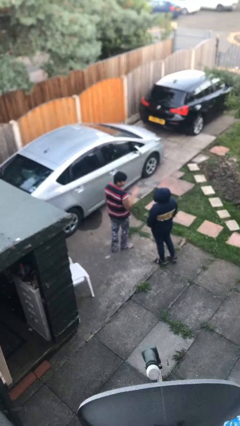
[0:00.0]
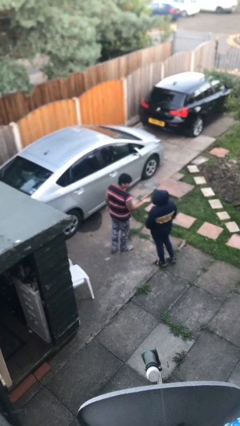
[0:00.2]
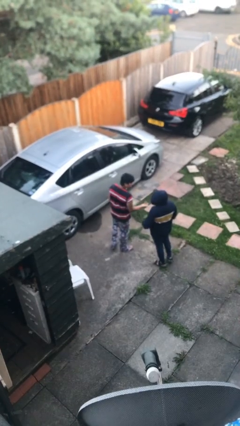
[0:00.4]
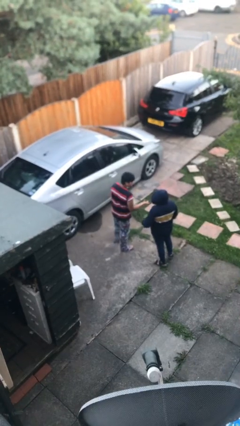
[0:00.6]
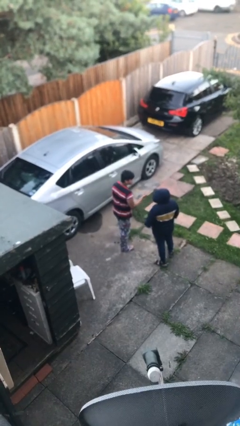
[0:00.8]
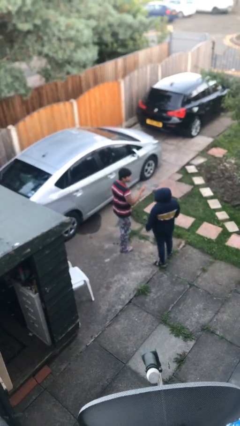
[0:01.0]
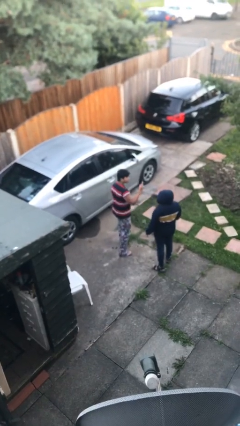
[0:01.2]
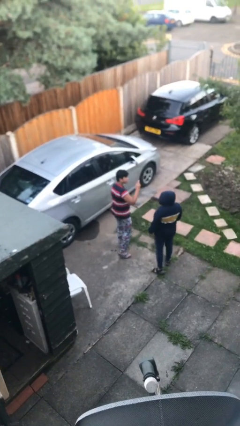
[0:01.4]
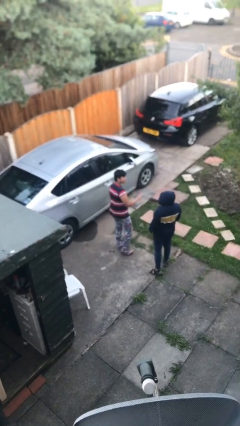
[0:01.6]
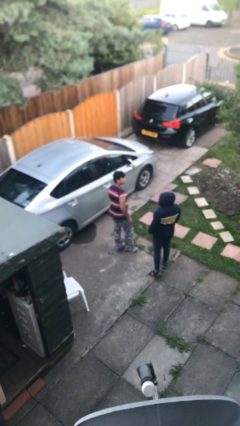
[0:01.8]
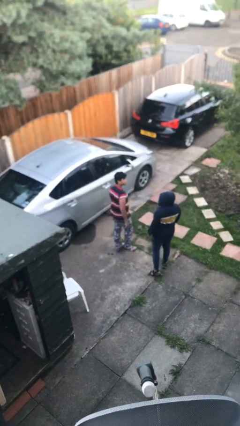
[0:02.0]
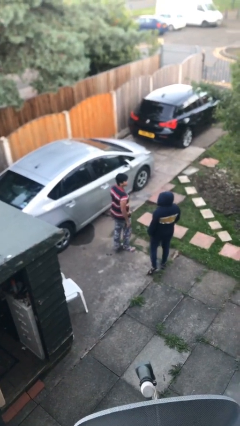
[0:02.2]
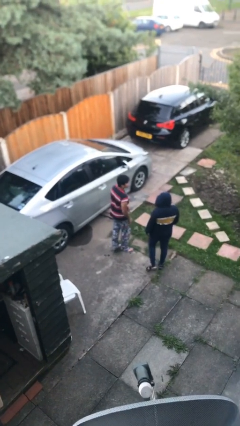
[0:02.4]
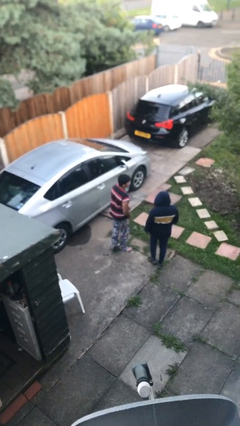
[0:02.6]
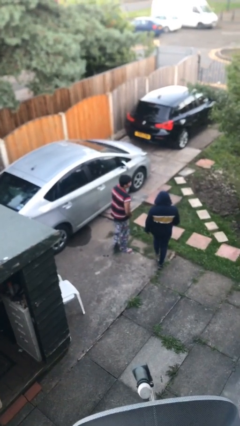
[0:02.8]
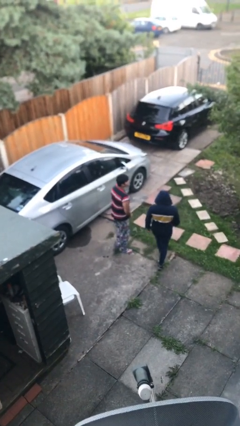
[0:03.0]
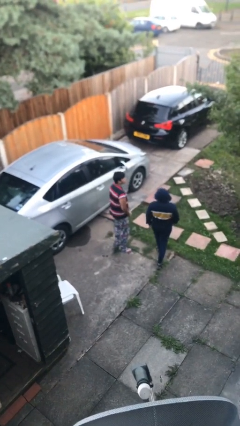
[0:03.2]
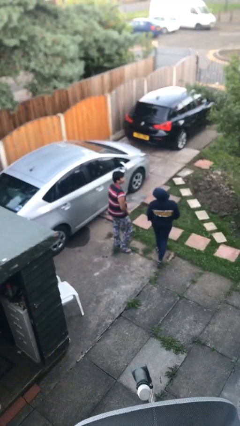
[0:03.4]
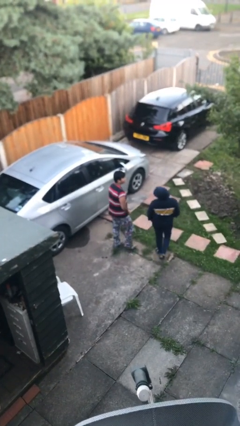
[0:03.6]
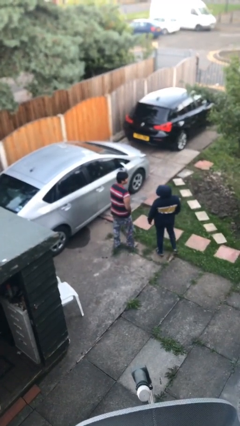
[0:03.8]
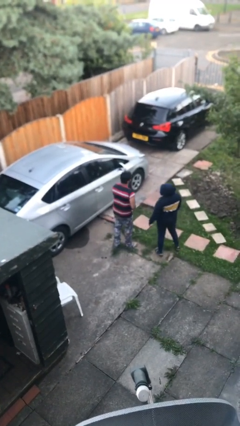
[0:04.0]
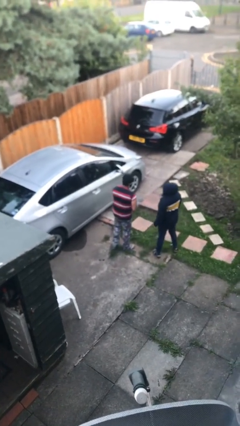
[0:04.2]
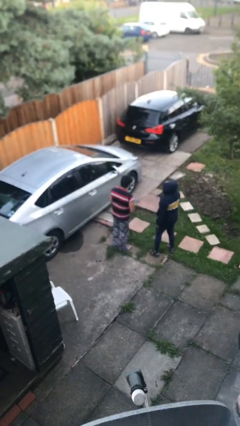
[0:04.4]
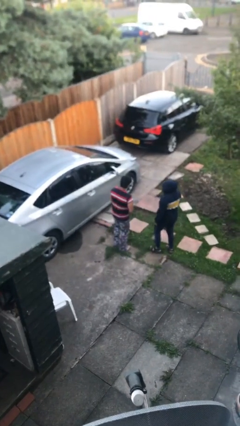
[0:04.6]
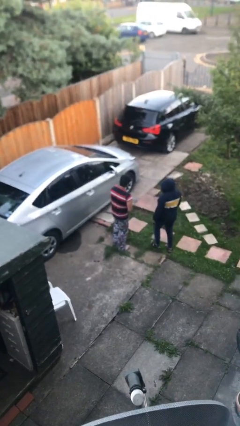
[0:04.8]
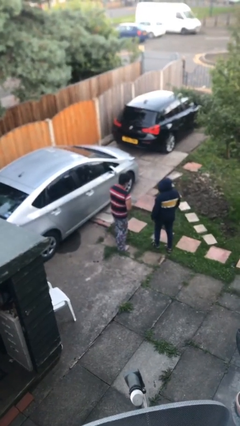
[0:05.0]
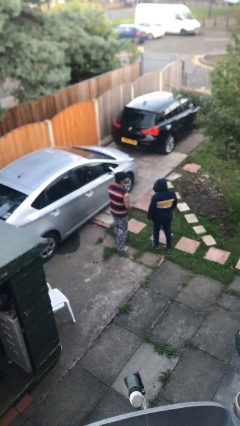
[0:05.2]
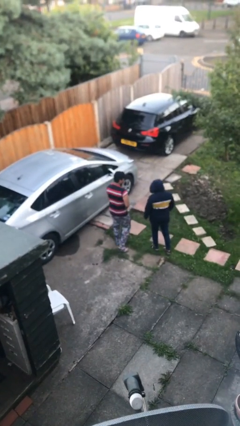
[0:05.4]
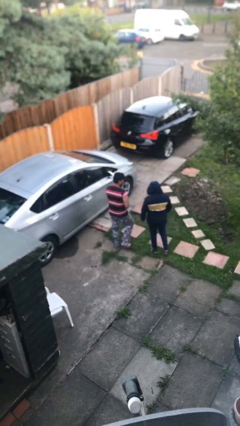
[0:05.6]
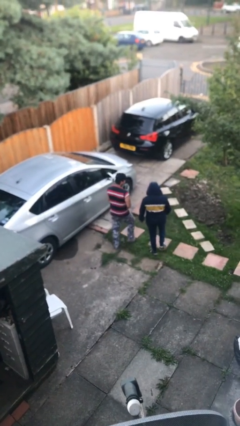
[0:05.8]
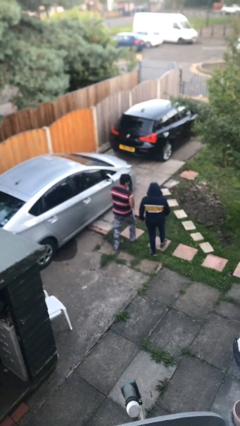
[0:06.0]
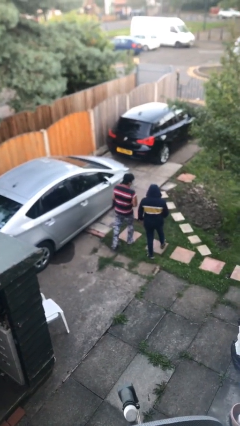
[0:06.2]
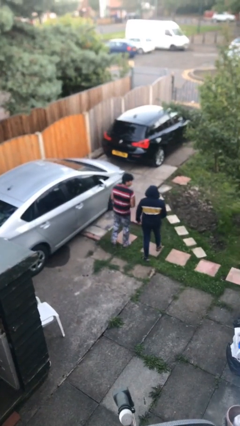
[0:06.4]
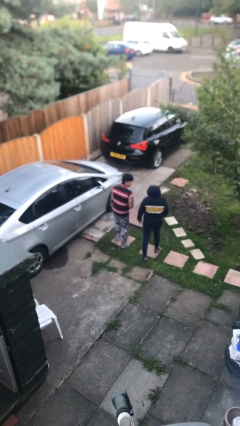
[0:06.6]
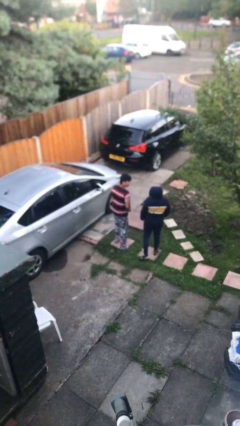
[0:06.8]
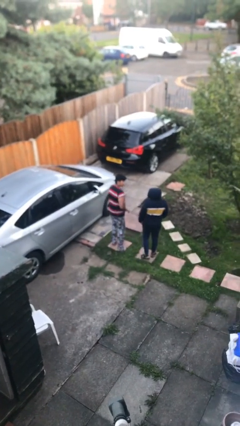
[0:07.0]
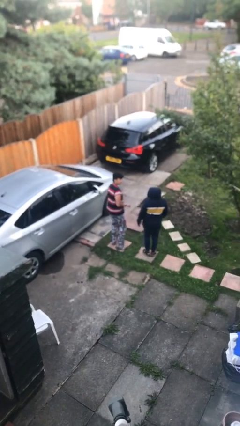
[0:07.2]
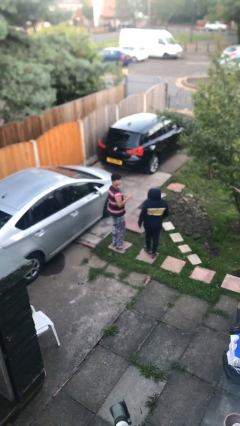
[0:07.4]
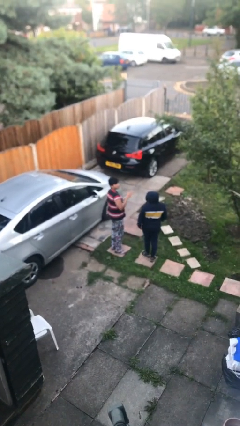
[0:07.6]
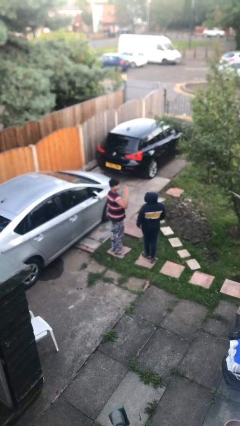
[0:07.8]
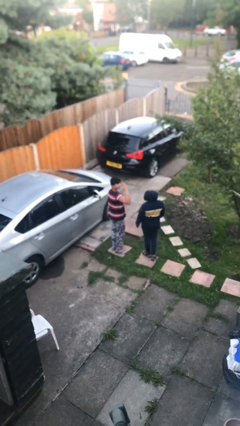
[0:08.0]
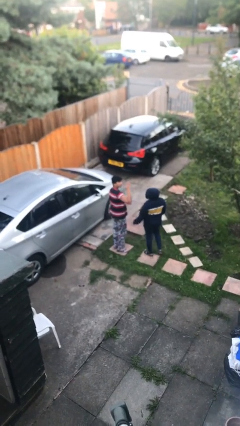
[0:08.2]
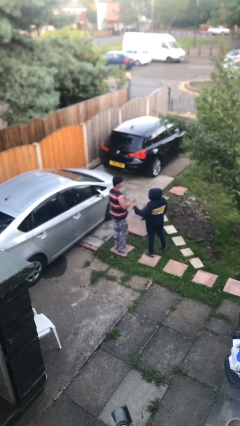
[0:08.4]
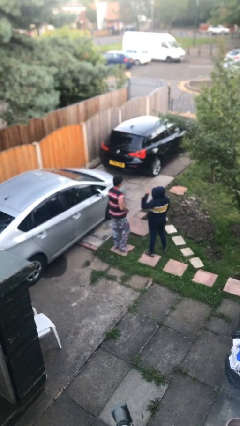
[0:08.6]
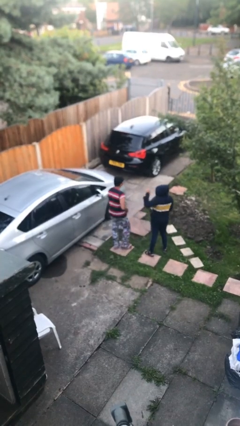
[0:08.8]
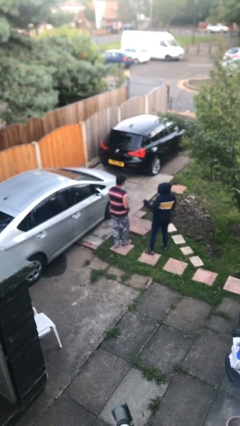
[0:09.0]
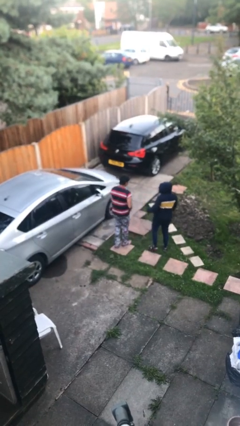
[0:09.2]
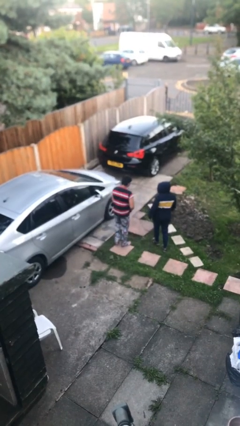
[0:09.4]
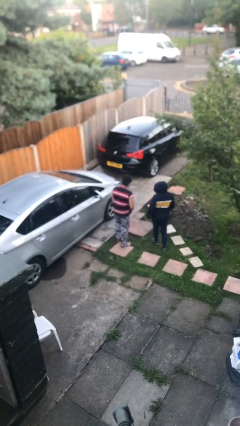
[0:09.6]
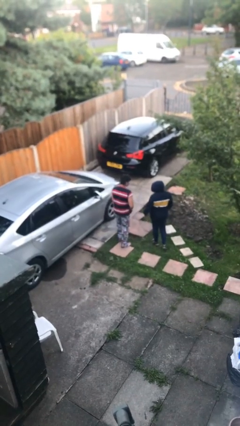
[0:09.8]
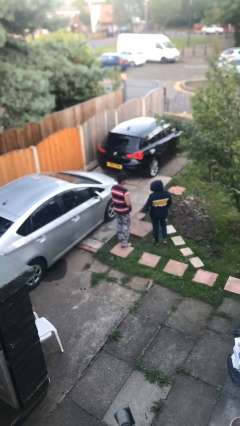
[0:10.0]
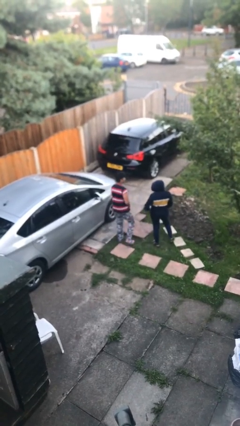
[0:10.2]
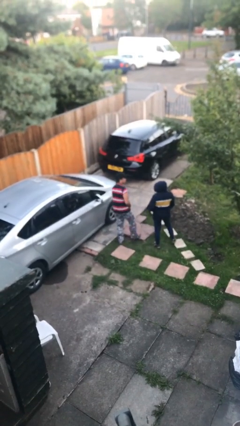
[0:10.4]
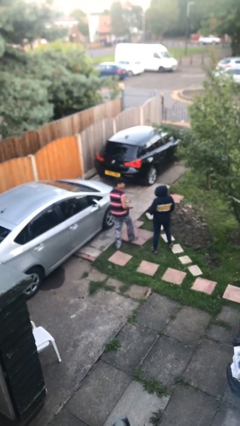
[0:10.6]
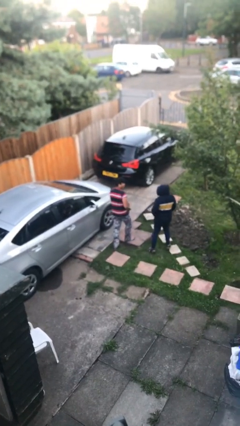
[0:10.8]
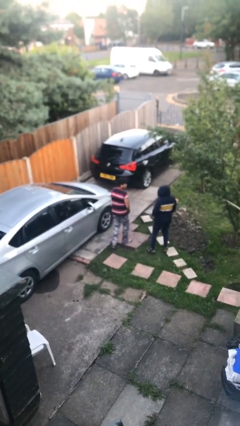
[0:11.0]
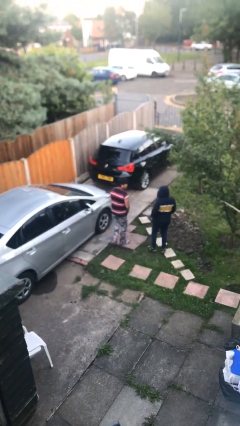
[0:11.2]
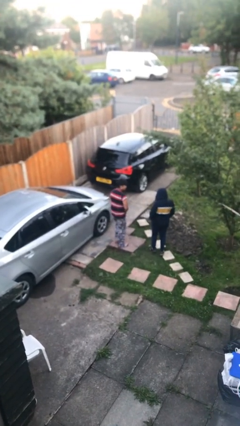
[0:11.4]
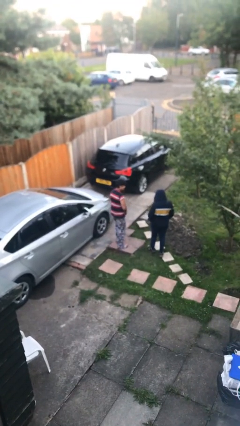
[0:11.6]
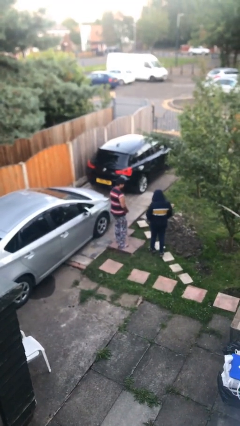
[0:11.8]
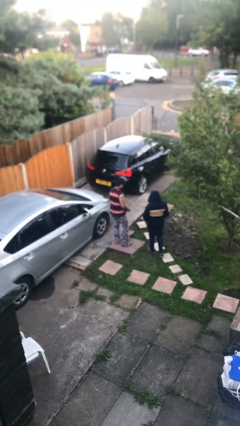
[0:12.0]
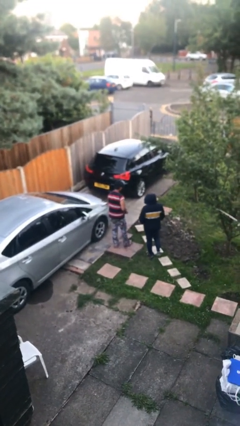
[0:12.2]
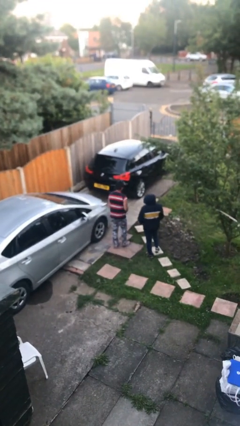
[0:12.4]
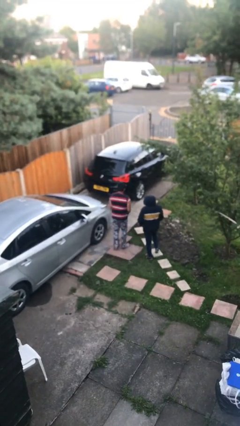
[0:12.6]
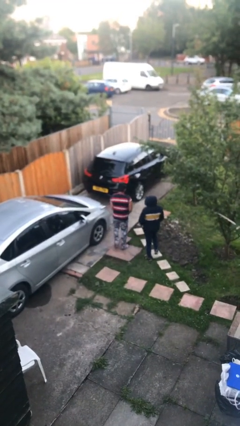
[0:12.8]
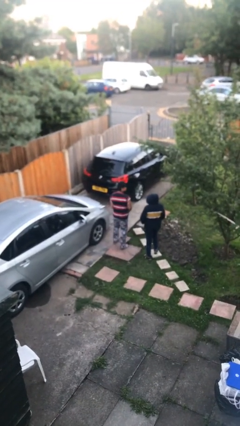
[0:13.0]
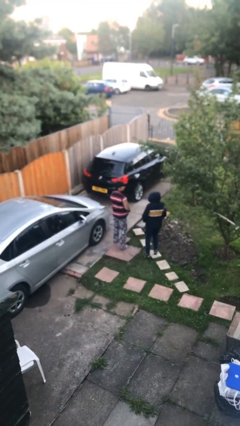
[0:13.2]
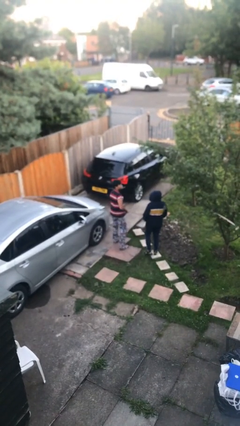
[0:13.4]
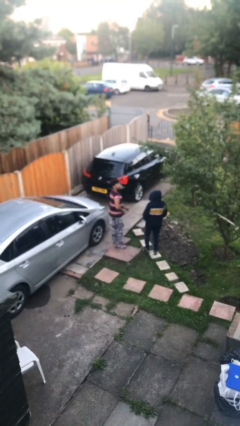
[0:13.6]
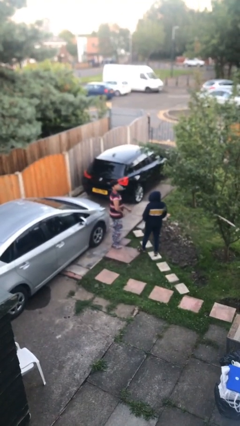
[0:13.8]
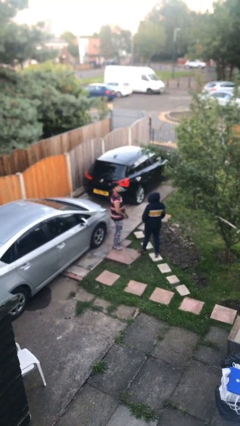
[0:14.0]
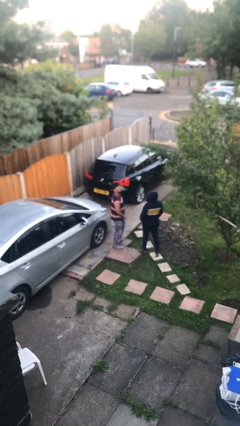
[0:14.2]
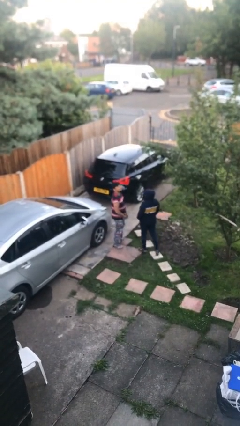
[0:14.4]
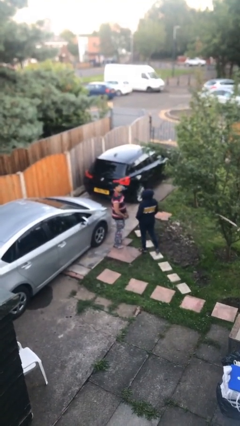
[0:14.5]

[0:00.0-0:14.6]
person talks to person

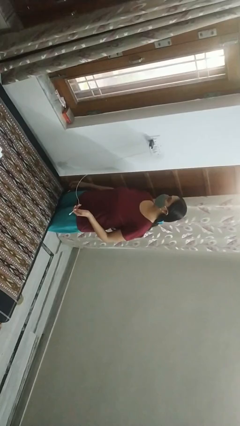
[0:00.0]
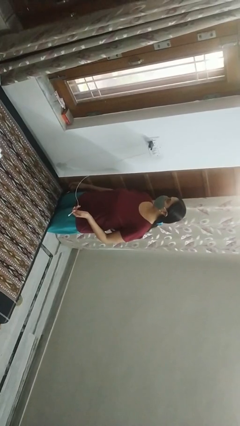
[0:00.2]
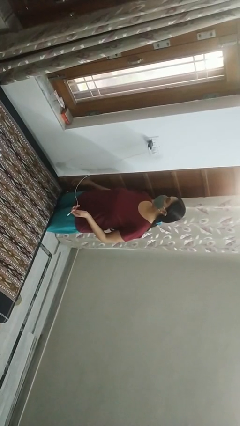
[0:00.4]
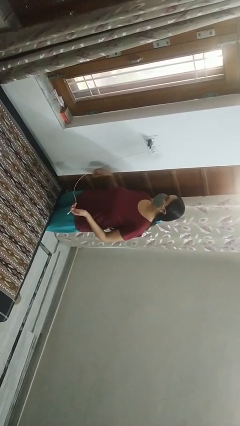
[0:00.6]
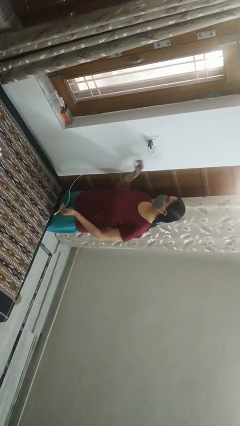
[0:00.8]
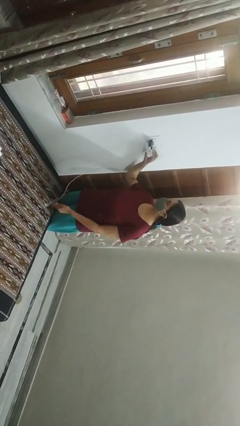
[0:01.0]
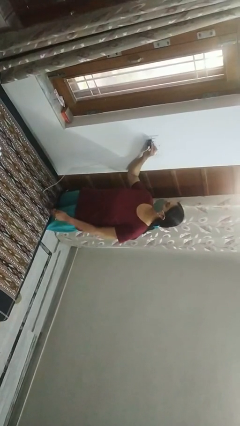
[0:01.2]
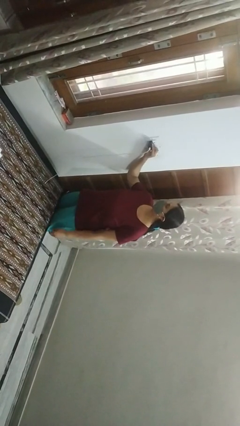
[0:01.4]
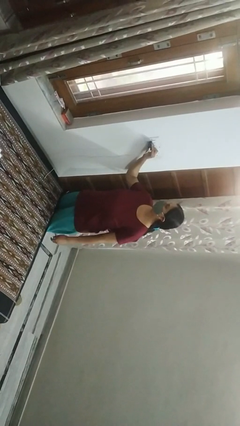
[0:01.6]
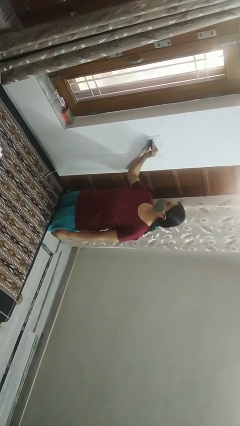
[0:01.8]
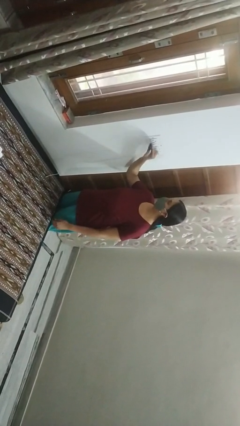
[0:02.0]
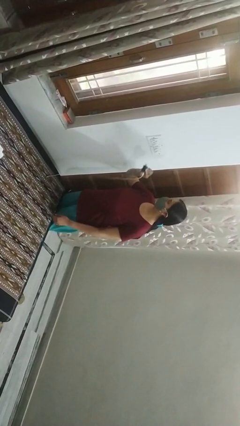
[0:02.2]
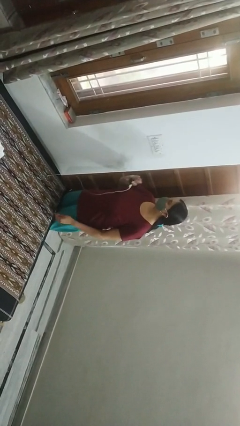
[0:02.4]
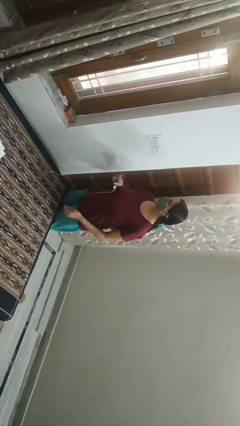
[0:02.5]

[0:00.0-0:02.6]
person unplugs from electrical socket

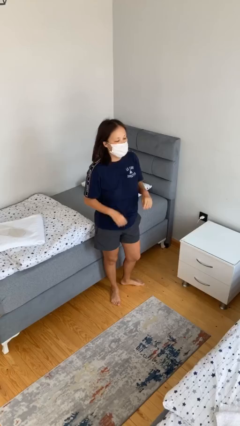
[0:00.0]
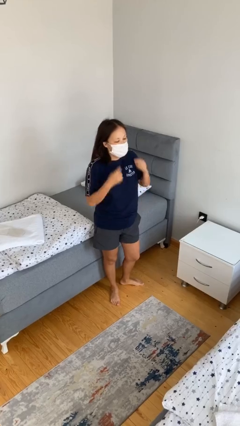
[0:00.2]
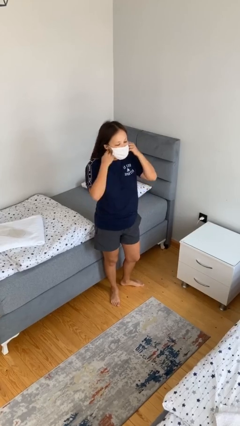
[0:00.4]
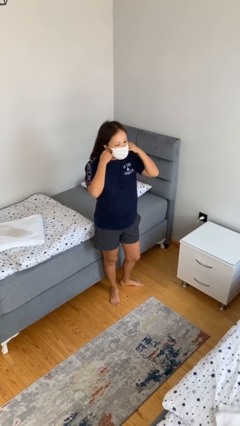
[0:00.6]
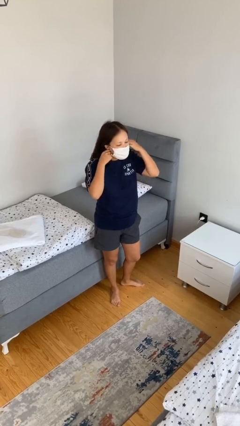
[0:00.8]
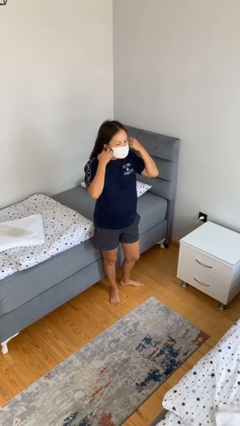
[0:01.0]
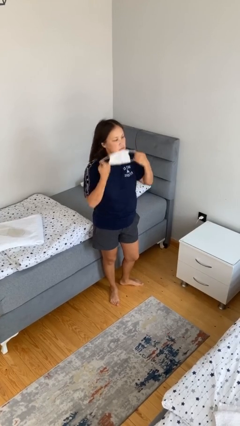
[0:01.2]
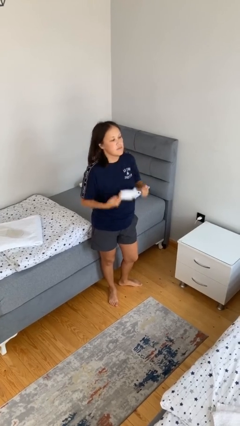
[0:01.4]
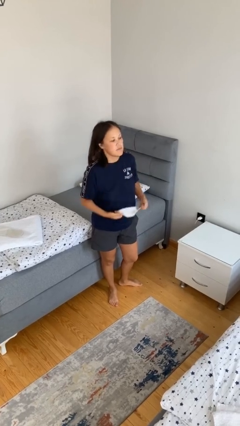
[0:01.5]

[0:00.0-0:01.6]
person takes off facemask
